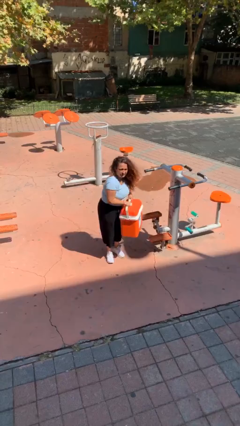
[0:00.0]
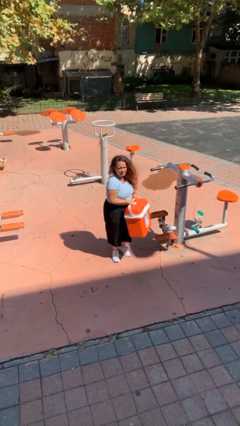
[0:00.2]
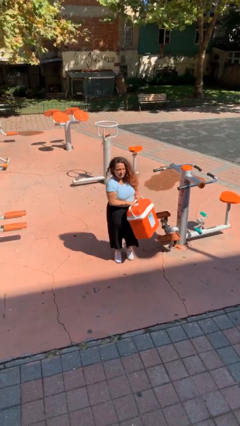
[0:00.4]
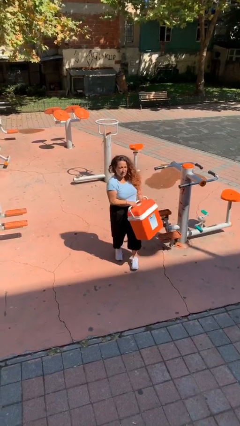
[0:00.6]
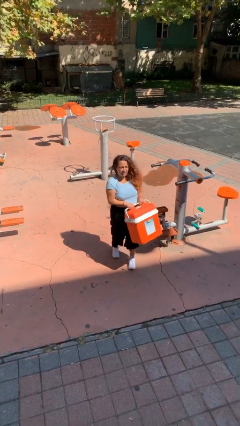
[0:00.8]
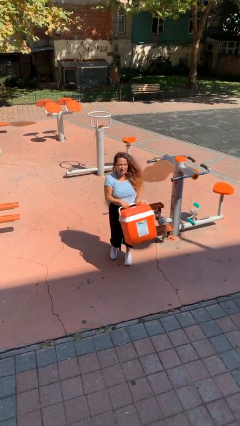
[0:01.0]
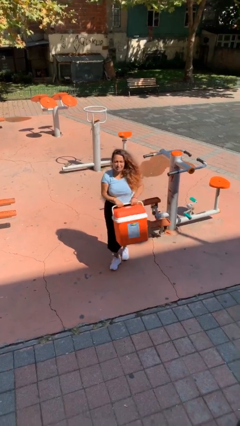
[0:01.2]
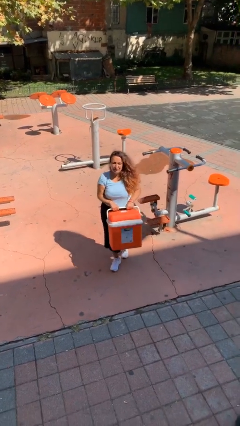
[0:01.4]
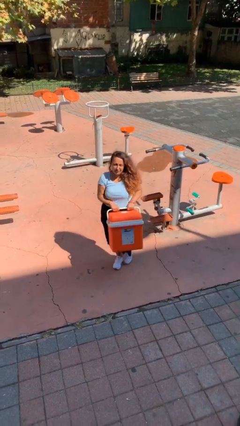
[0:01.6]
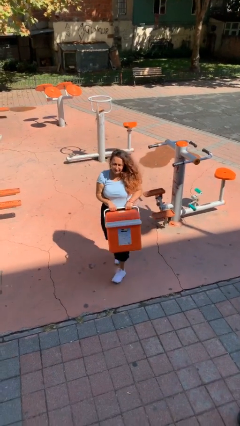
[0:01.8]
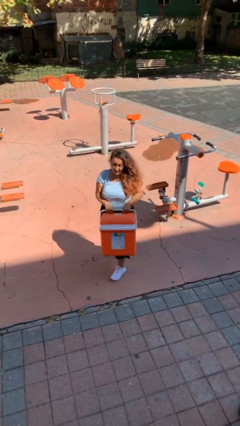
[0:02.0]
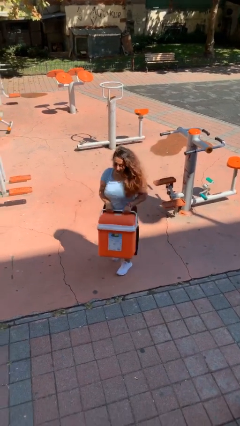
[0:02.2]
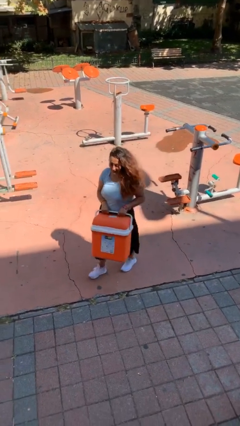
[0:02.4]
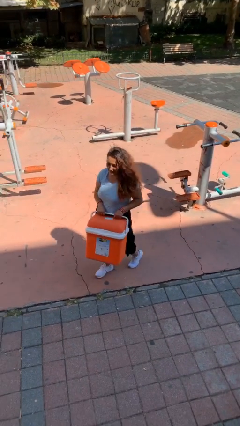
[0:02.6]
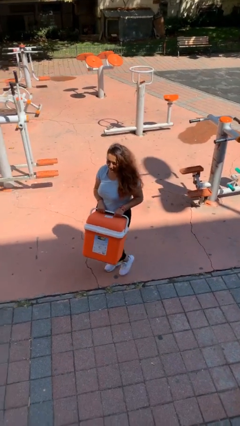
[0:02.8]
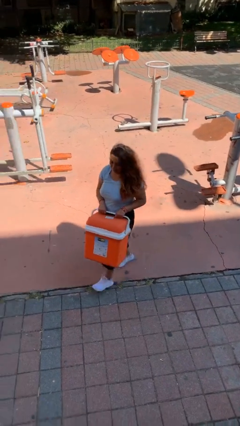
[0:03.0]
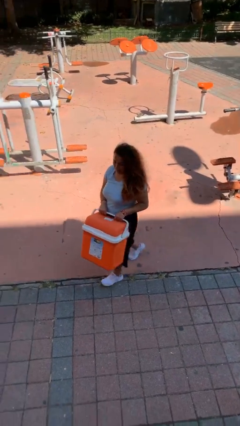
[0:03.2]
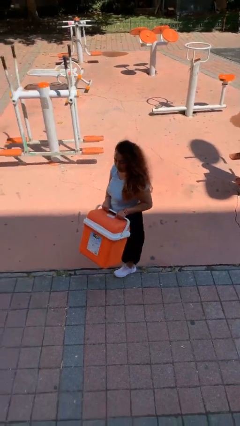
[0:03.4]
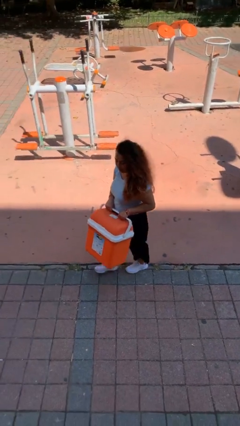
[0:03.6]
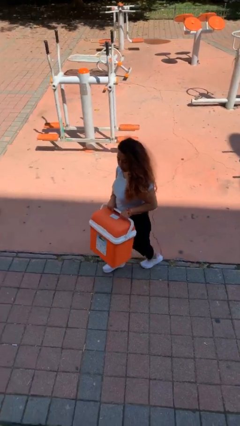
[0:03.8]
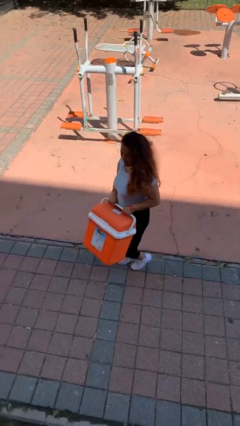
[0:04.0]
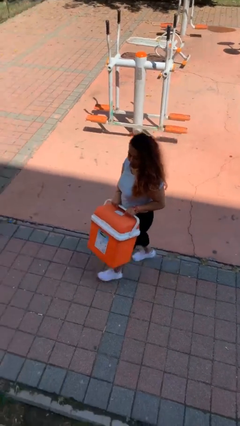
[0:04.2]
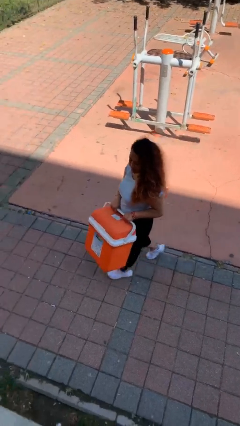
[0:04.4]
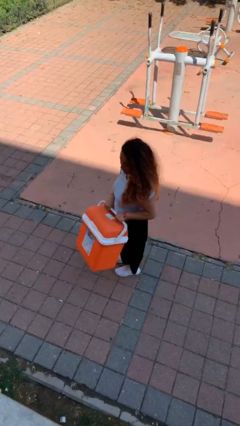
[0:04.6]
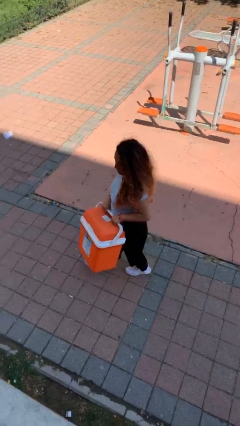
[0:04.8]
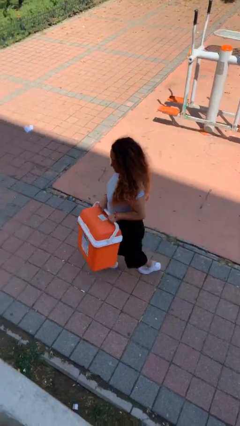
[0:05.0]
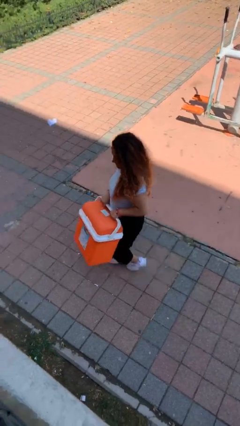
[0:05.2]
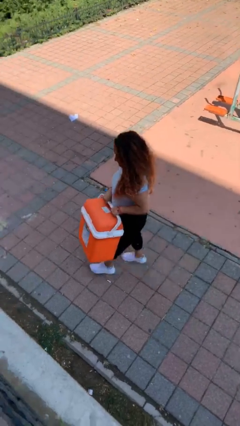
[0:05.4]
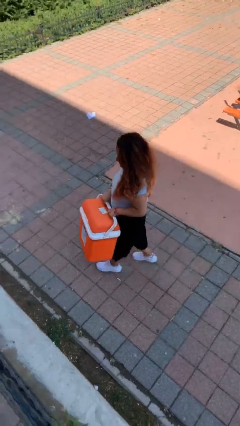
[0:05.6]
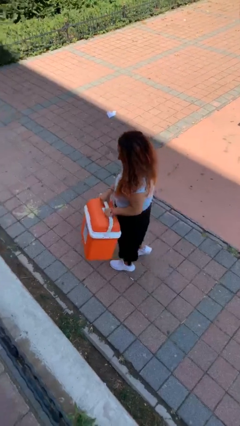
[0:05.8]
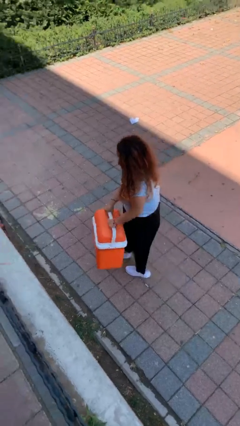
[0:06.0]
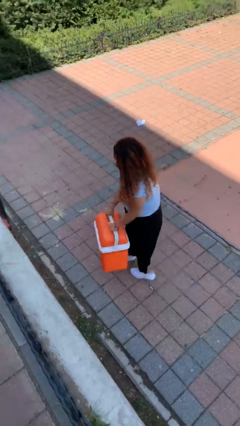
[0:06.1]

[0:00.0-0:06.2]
person carries heavy object

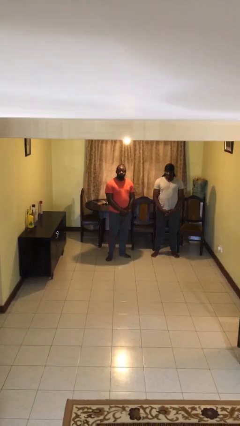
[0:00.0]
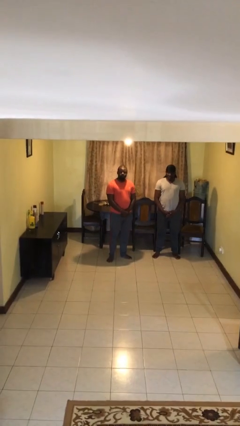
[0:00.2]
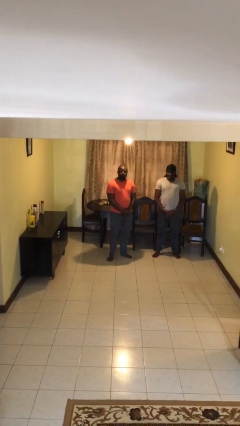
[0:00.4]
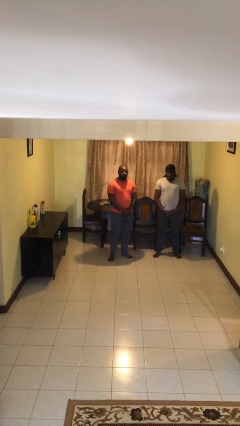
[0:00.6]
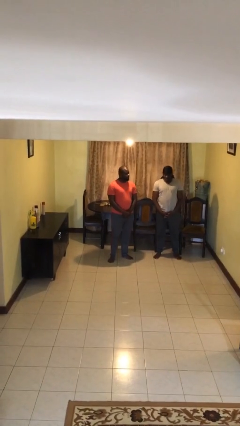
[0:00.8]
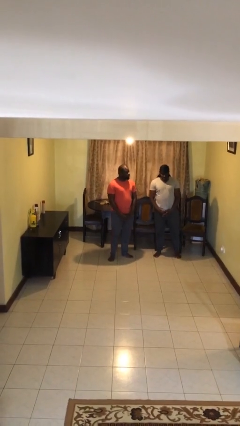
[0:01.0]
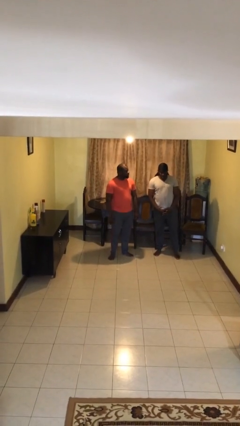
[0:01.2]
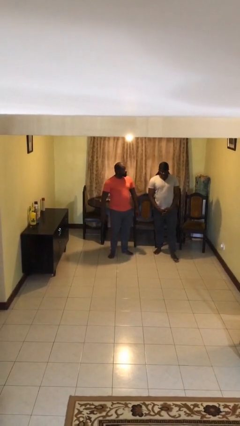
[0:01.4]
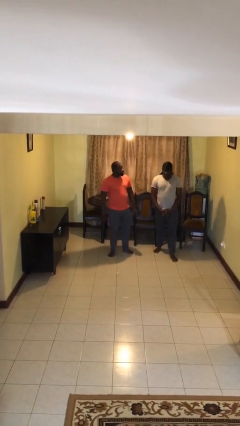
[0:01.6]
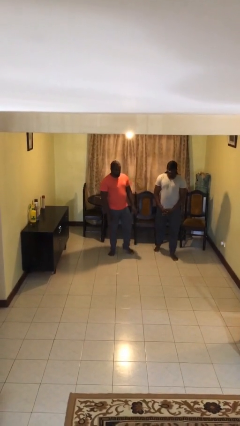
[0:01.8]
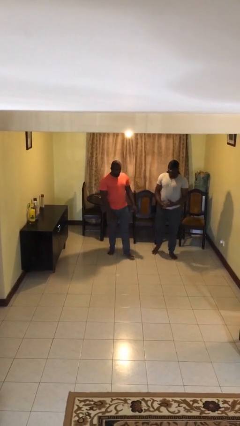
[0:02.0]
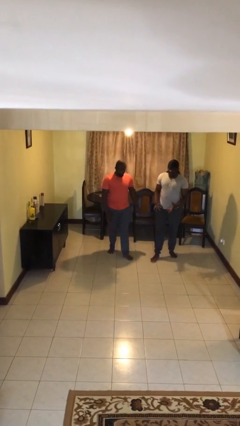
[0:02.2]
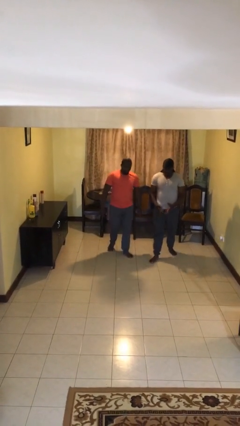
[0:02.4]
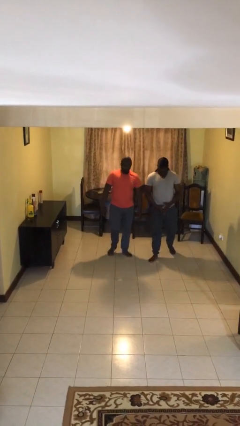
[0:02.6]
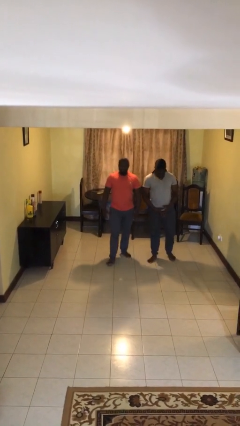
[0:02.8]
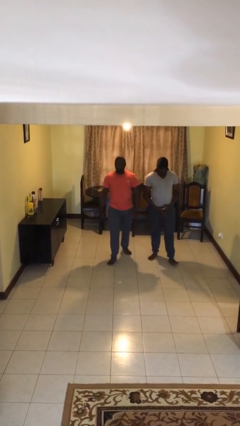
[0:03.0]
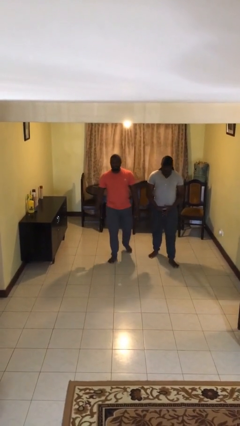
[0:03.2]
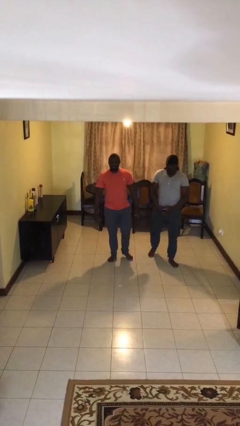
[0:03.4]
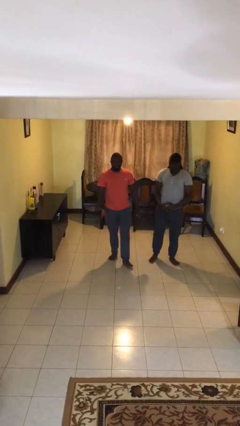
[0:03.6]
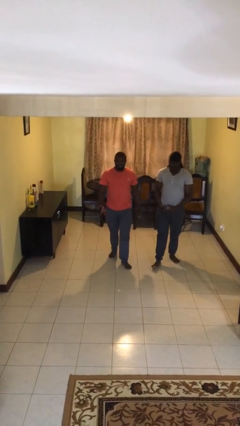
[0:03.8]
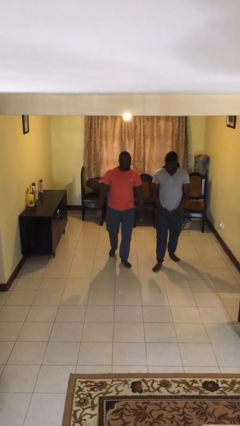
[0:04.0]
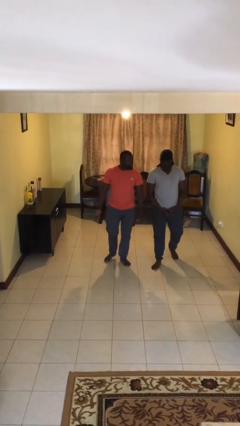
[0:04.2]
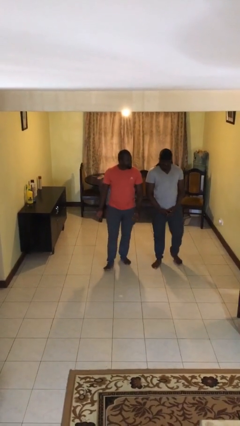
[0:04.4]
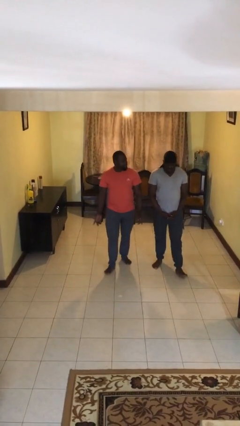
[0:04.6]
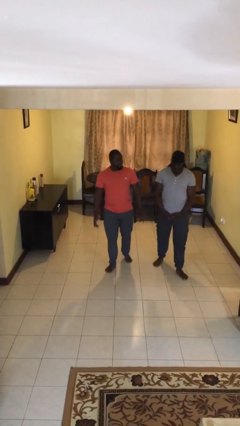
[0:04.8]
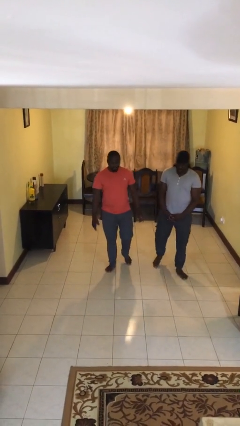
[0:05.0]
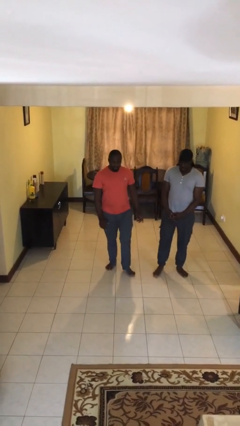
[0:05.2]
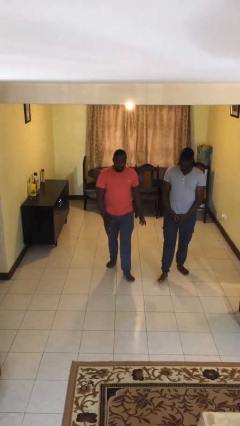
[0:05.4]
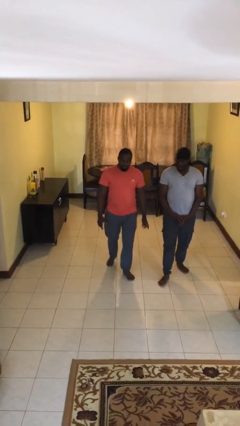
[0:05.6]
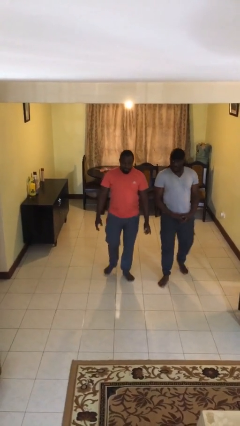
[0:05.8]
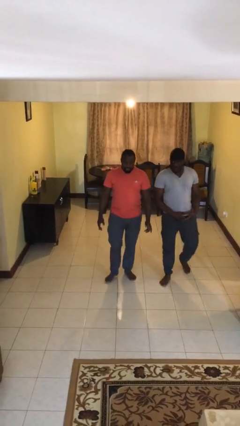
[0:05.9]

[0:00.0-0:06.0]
person talks to person

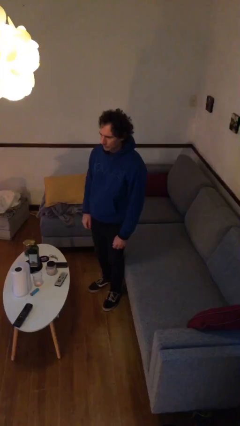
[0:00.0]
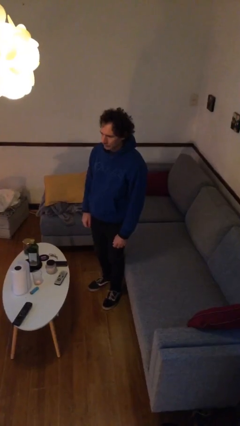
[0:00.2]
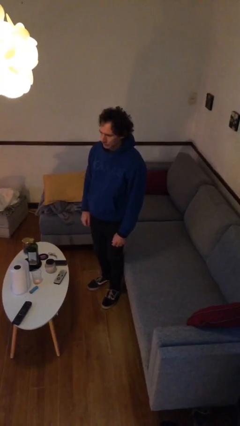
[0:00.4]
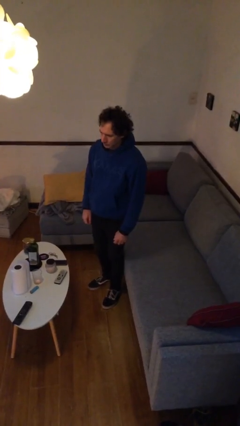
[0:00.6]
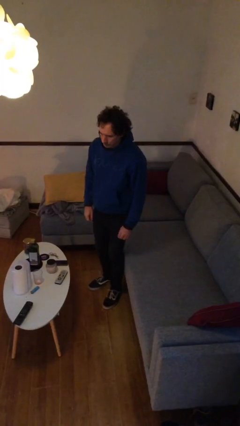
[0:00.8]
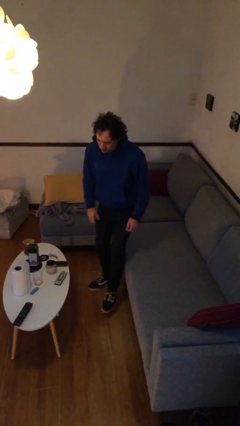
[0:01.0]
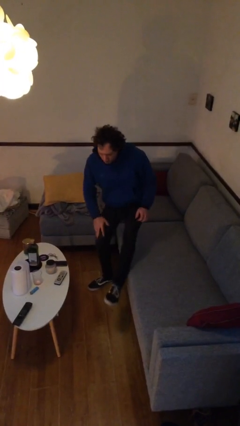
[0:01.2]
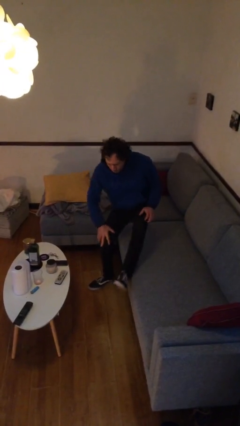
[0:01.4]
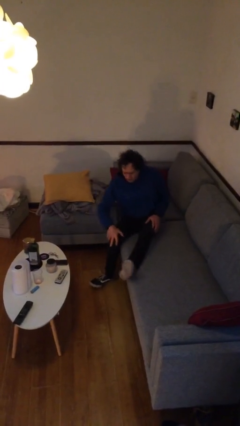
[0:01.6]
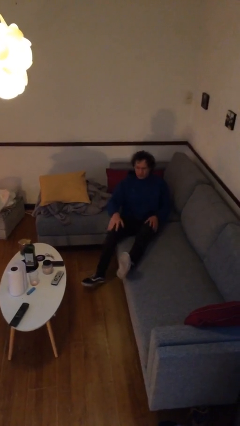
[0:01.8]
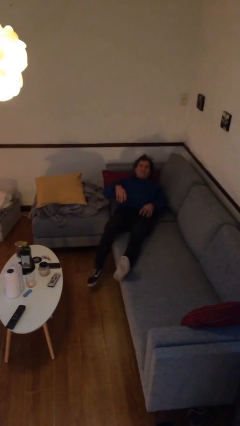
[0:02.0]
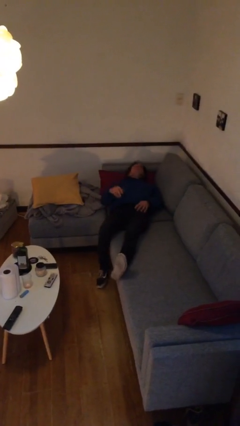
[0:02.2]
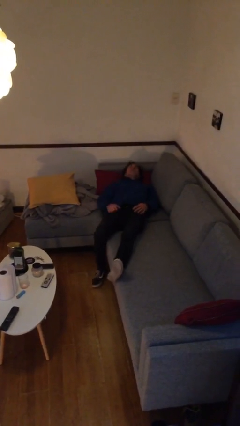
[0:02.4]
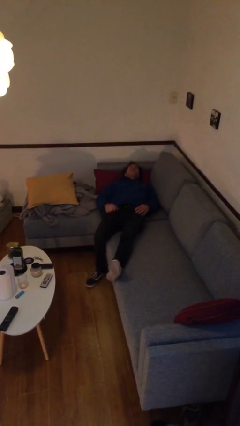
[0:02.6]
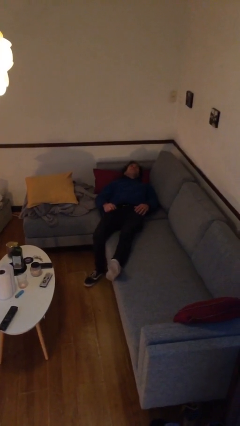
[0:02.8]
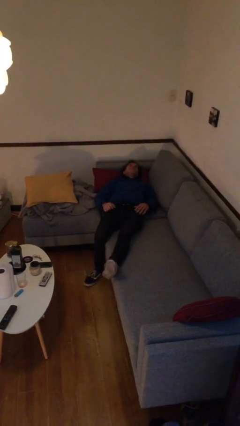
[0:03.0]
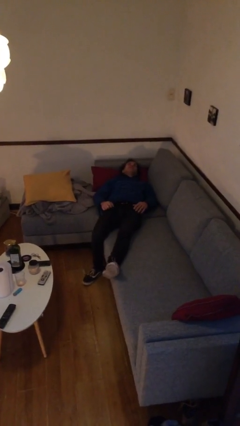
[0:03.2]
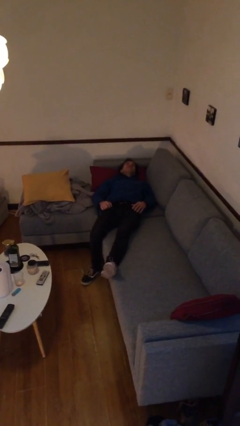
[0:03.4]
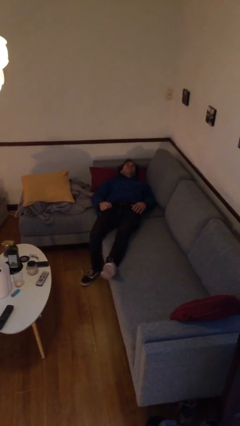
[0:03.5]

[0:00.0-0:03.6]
person lies down on couch

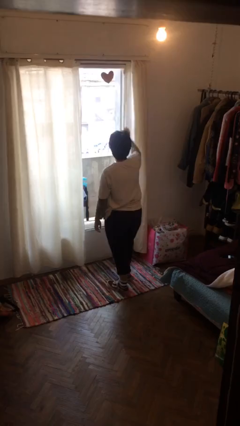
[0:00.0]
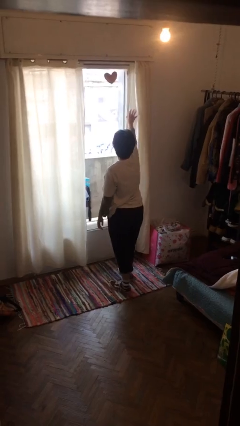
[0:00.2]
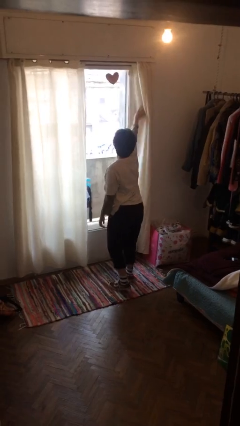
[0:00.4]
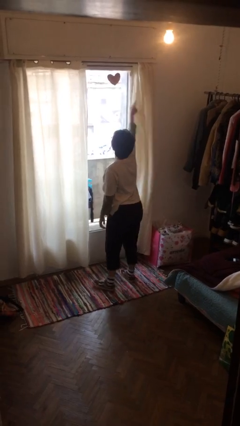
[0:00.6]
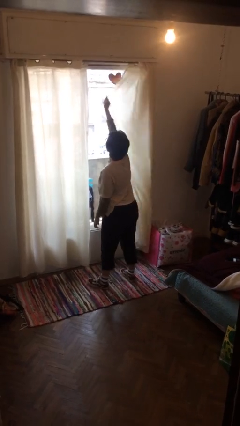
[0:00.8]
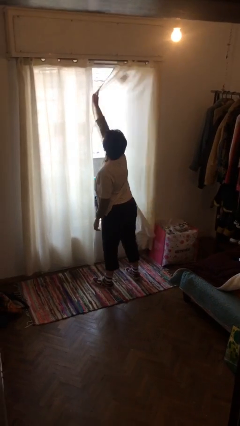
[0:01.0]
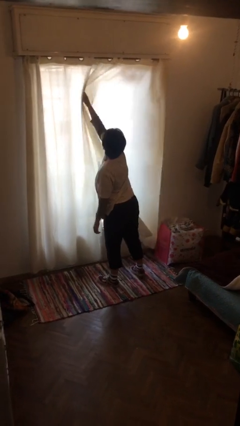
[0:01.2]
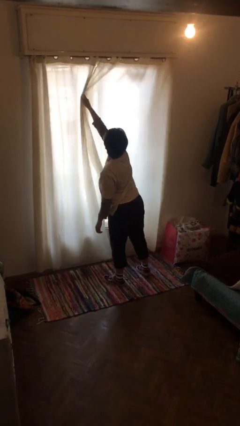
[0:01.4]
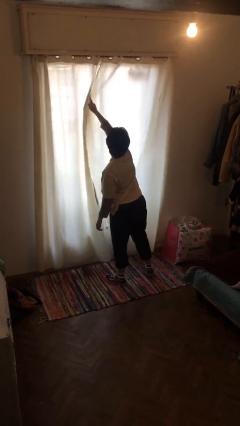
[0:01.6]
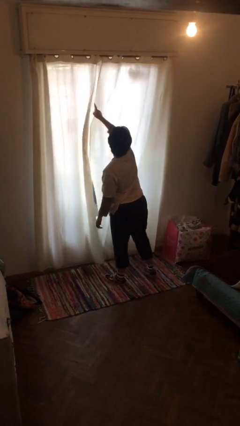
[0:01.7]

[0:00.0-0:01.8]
person closes curtains

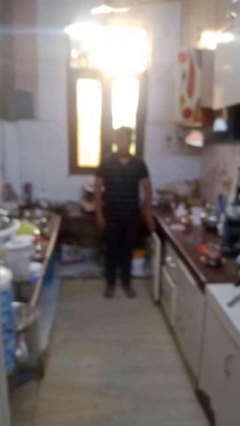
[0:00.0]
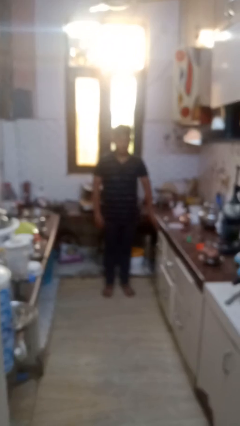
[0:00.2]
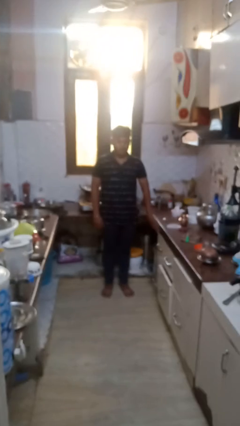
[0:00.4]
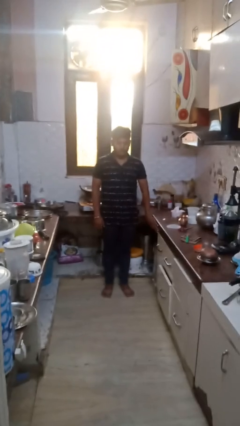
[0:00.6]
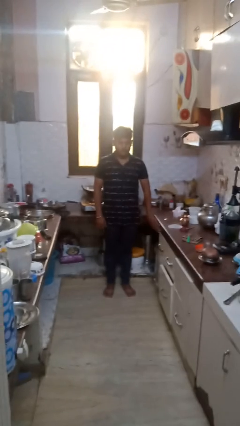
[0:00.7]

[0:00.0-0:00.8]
person closes dishwasher
